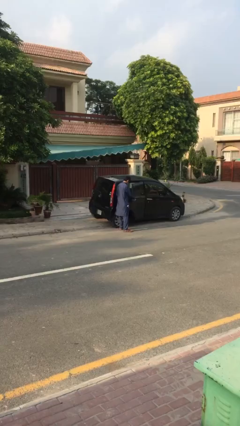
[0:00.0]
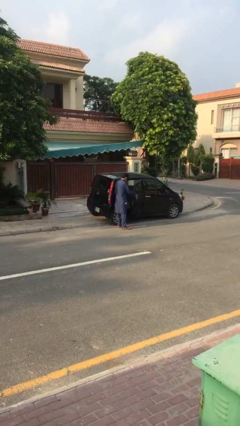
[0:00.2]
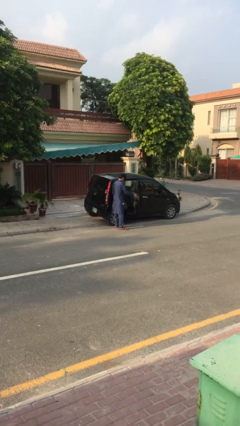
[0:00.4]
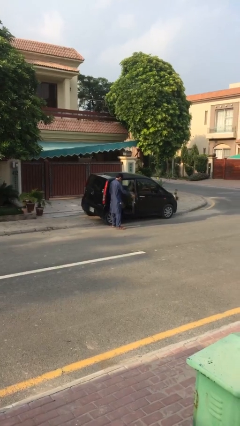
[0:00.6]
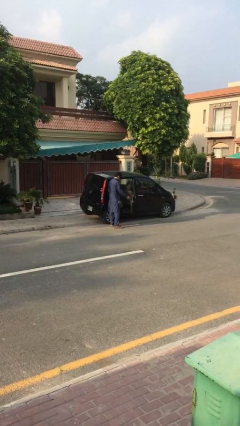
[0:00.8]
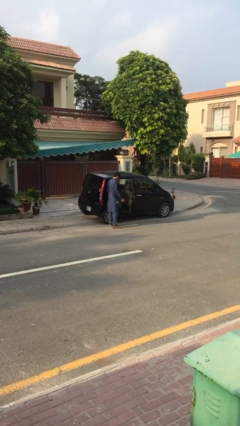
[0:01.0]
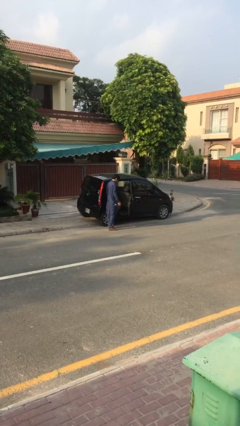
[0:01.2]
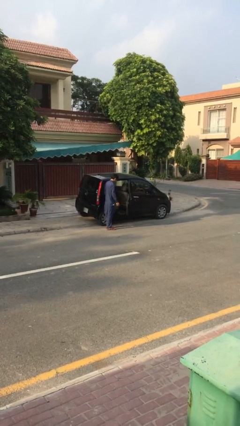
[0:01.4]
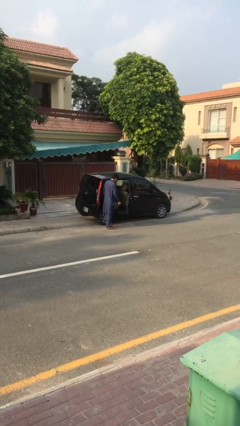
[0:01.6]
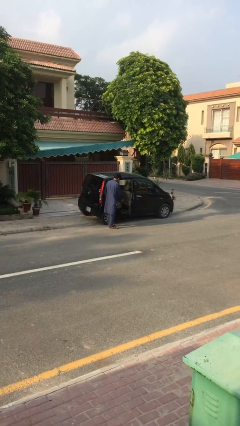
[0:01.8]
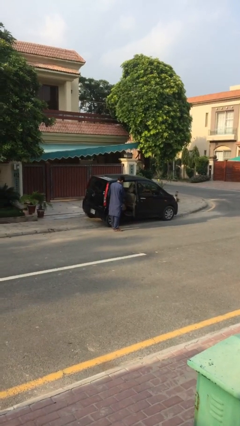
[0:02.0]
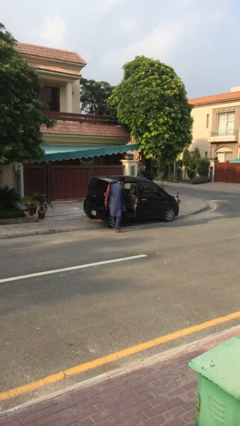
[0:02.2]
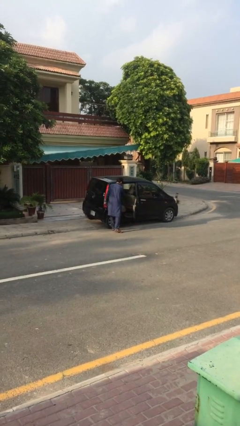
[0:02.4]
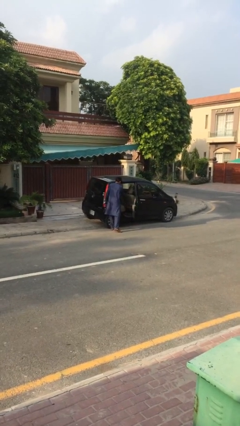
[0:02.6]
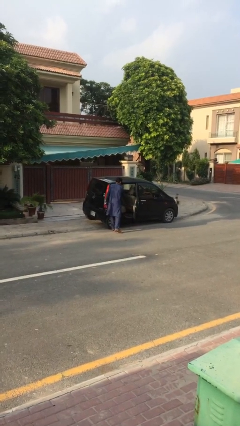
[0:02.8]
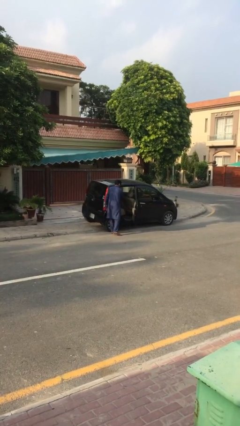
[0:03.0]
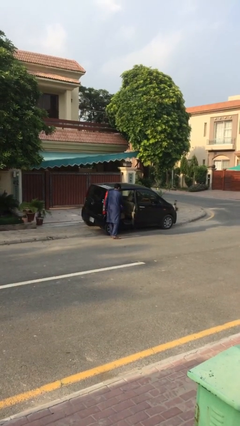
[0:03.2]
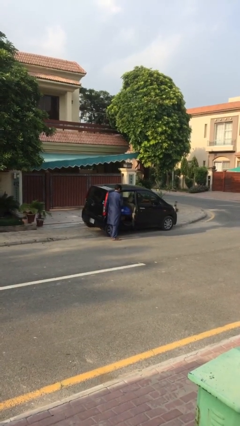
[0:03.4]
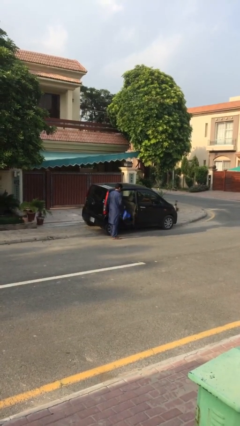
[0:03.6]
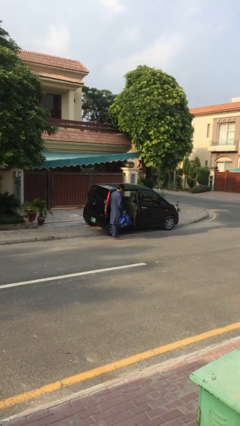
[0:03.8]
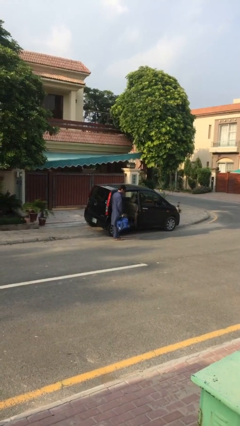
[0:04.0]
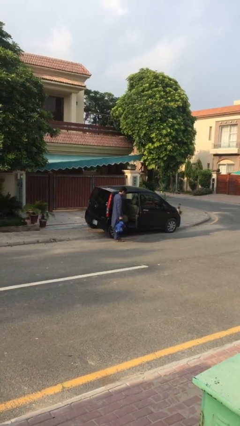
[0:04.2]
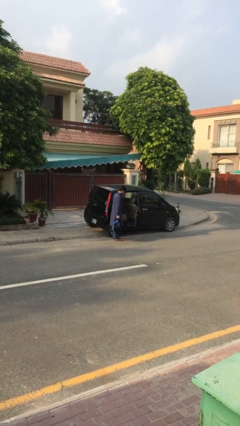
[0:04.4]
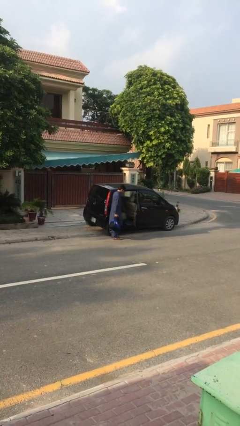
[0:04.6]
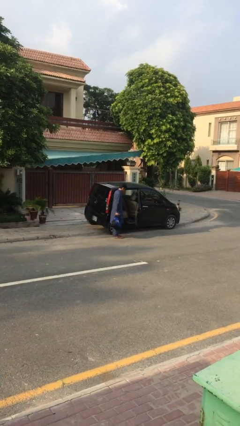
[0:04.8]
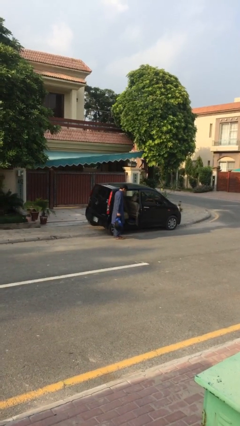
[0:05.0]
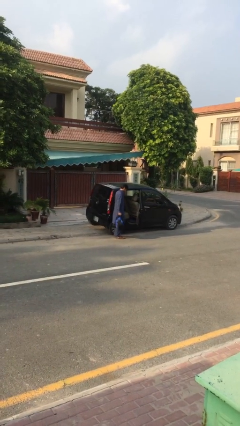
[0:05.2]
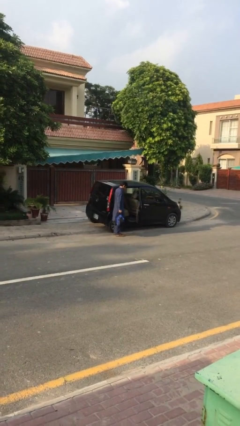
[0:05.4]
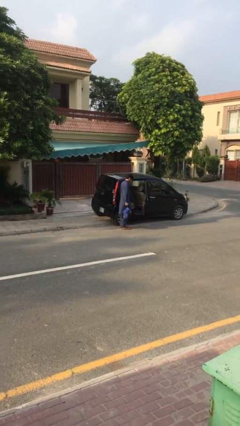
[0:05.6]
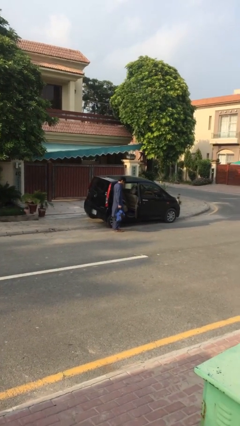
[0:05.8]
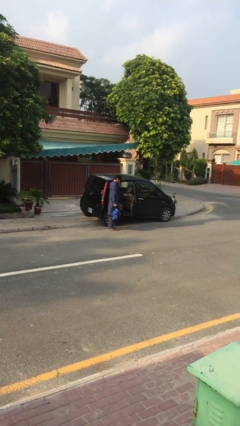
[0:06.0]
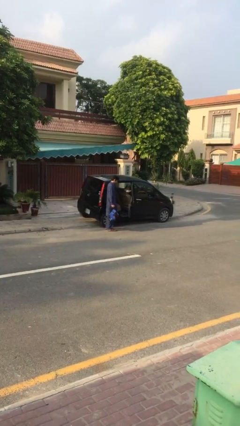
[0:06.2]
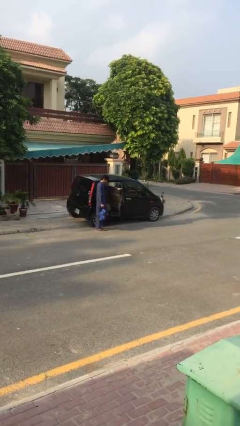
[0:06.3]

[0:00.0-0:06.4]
person unloads car

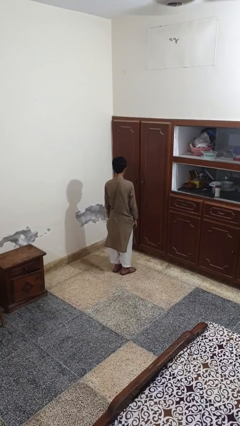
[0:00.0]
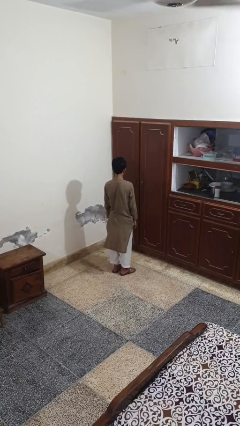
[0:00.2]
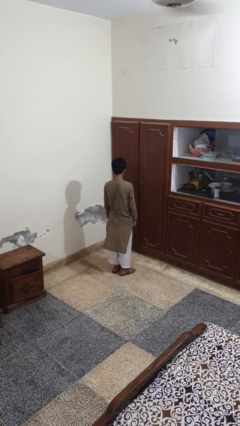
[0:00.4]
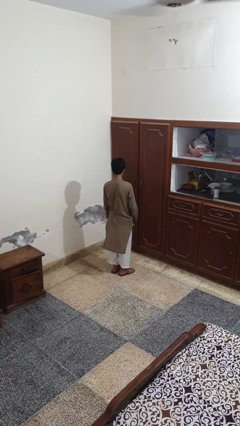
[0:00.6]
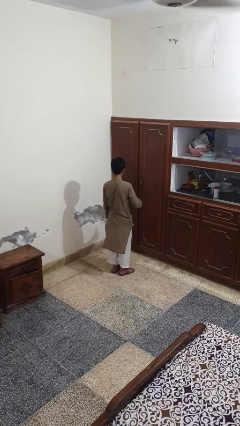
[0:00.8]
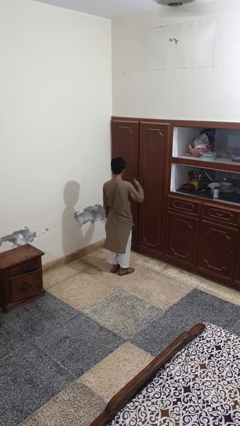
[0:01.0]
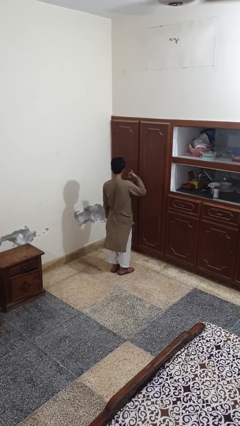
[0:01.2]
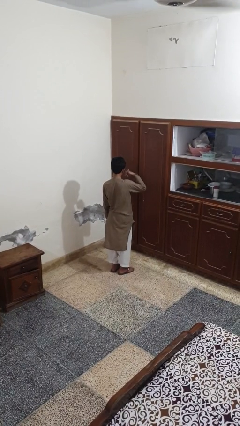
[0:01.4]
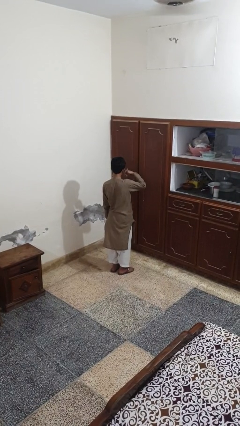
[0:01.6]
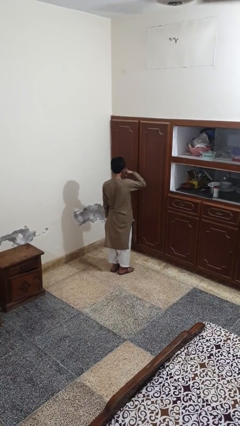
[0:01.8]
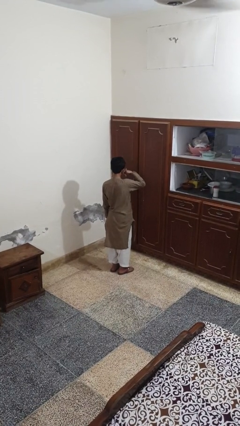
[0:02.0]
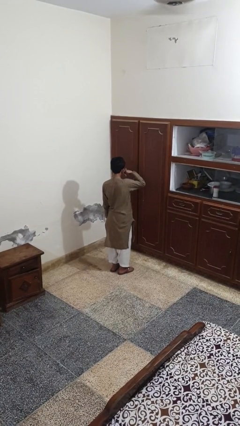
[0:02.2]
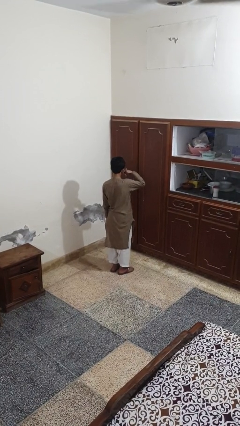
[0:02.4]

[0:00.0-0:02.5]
person gestures call me

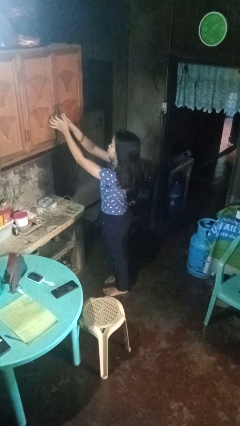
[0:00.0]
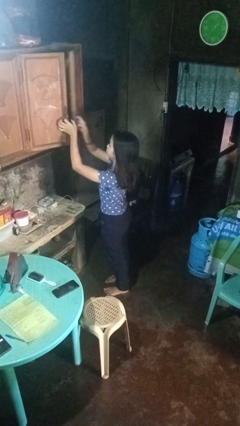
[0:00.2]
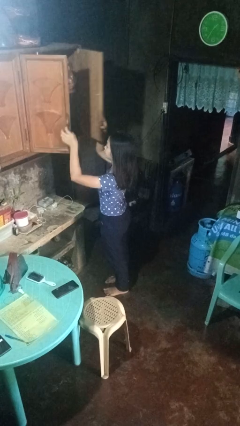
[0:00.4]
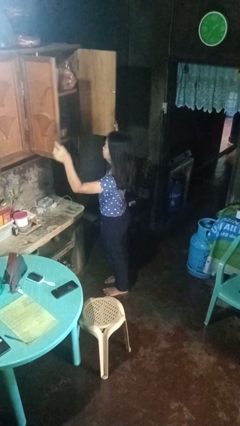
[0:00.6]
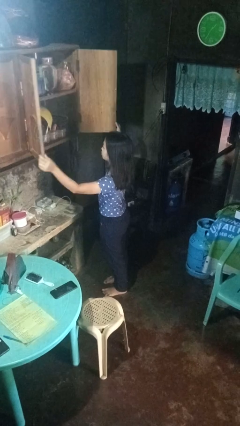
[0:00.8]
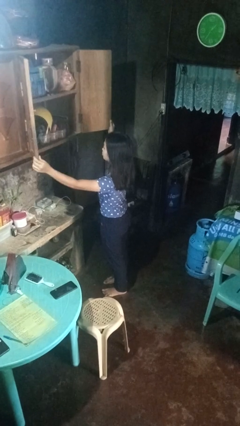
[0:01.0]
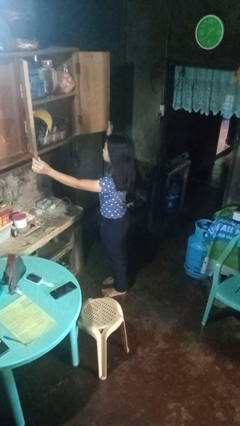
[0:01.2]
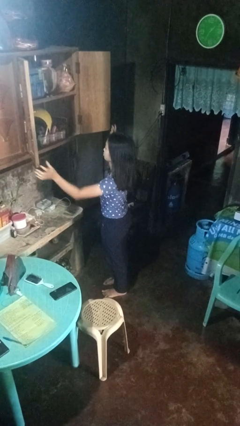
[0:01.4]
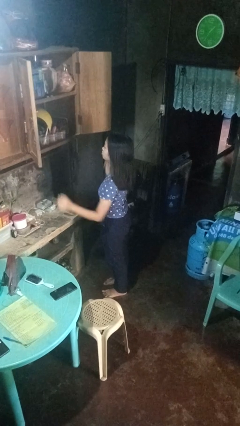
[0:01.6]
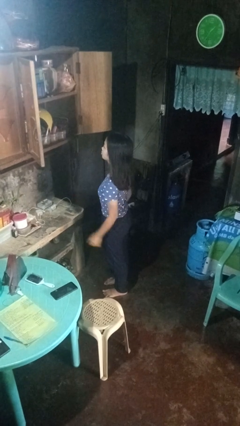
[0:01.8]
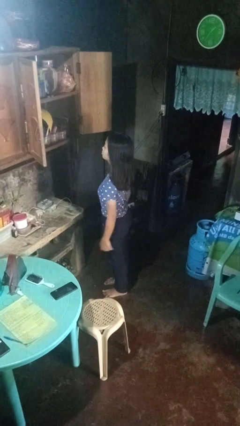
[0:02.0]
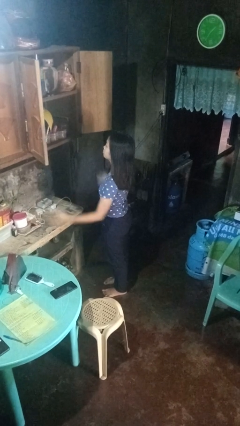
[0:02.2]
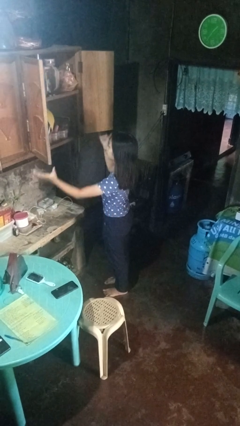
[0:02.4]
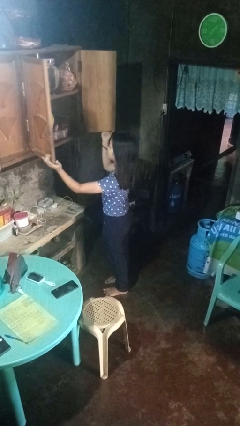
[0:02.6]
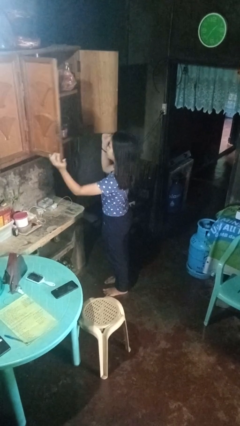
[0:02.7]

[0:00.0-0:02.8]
person opens cabinet

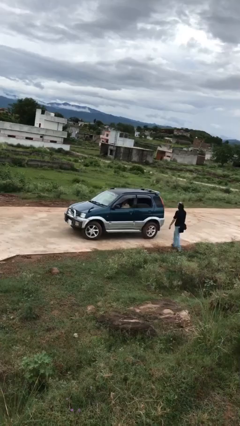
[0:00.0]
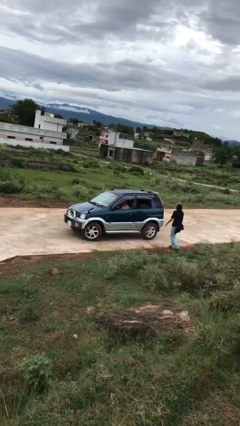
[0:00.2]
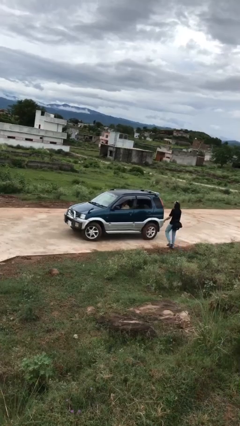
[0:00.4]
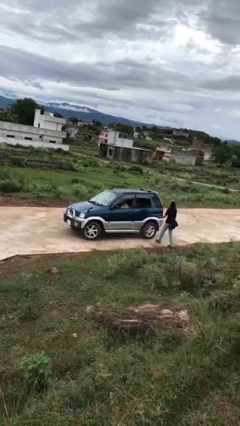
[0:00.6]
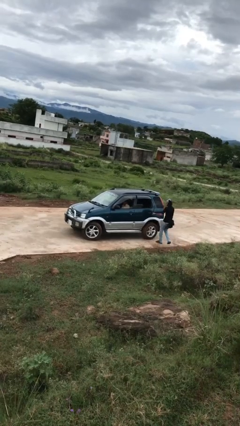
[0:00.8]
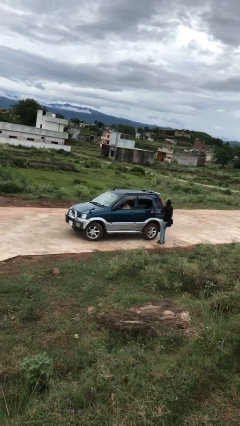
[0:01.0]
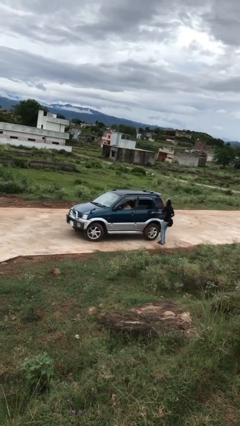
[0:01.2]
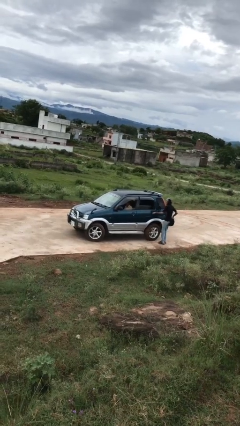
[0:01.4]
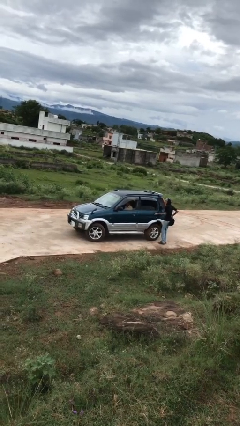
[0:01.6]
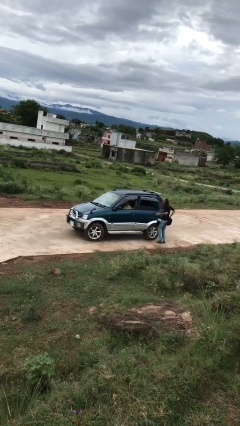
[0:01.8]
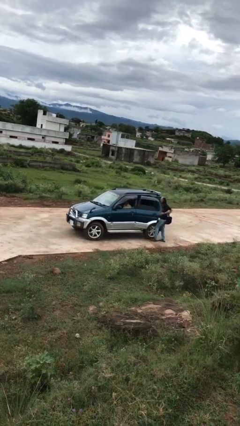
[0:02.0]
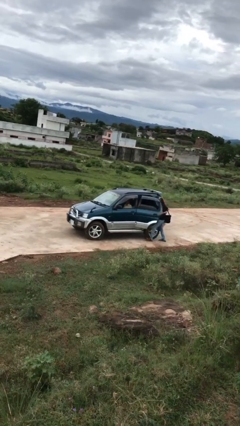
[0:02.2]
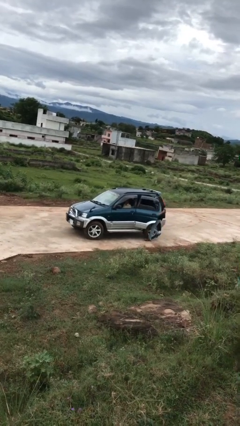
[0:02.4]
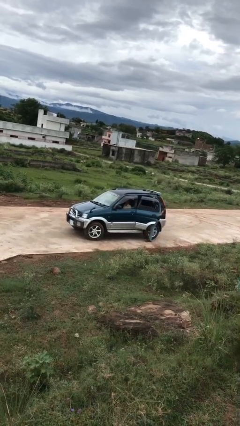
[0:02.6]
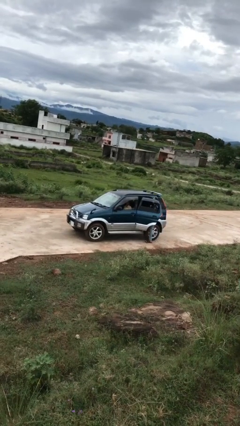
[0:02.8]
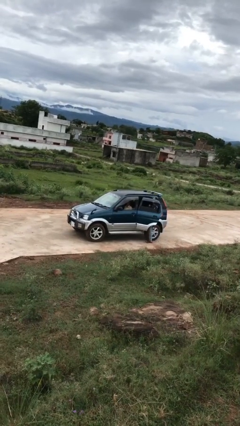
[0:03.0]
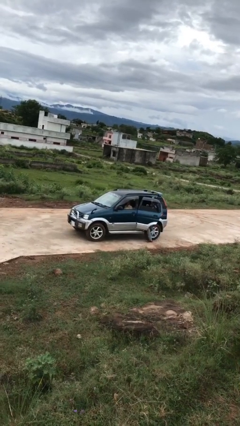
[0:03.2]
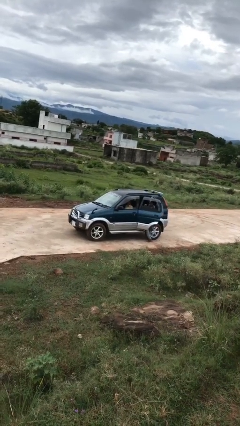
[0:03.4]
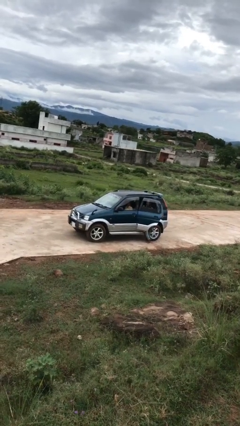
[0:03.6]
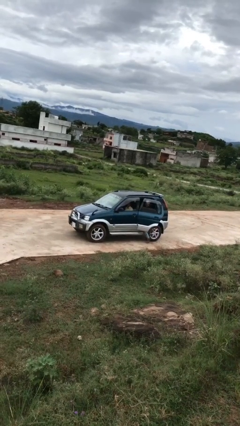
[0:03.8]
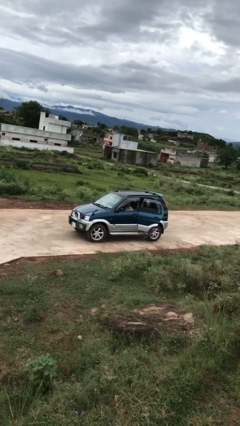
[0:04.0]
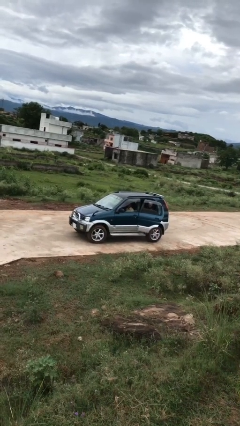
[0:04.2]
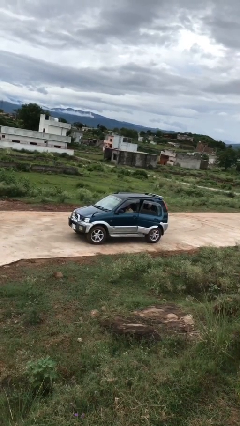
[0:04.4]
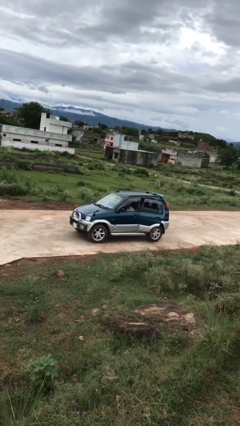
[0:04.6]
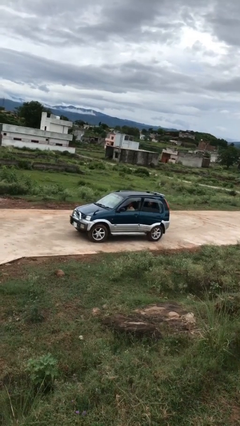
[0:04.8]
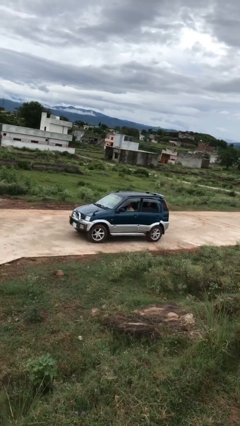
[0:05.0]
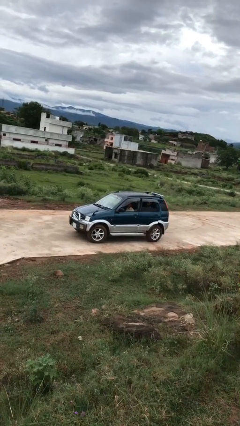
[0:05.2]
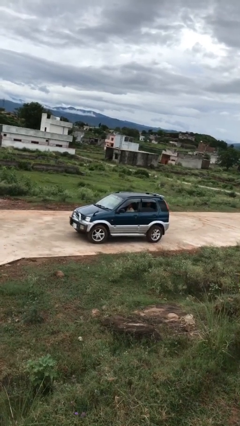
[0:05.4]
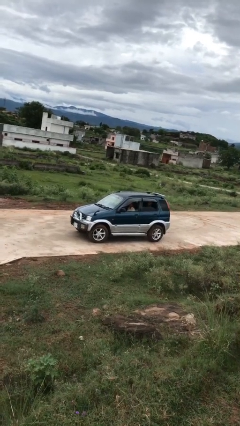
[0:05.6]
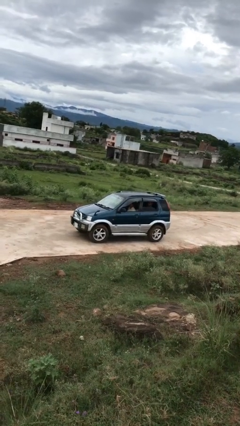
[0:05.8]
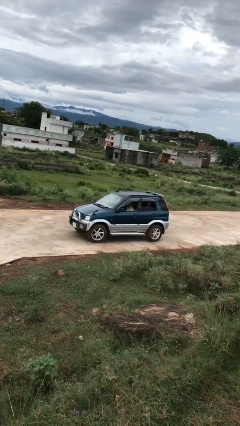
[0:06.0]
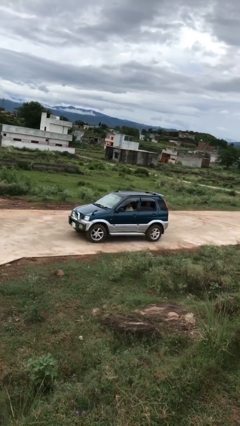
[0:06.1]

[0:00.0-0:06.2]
car picks up person
